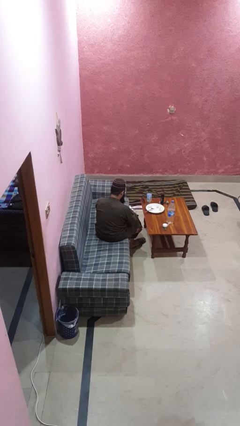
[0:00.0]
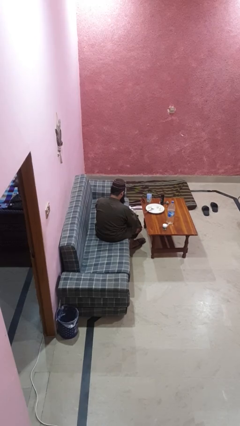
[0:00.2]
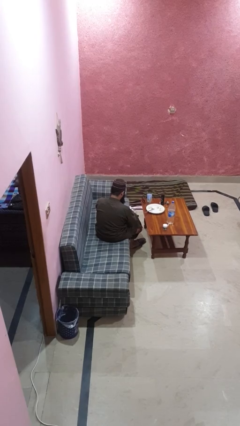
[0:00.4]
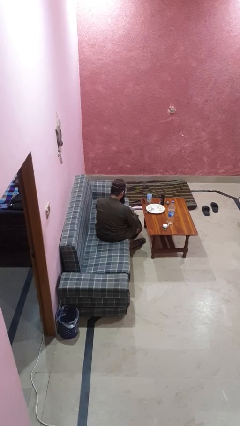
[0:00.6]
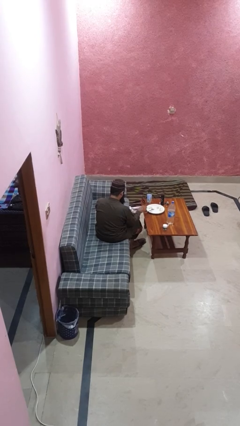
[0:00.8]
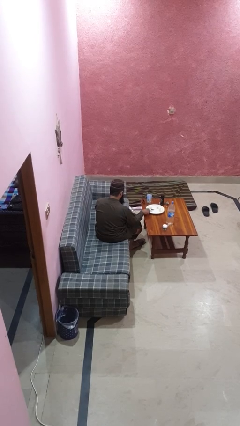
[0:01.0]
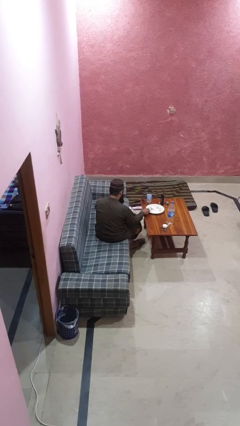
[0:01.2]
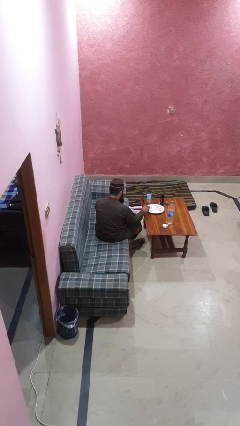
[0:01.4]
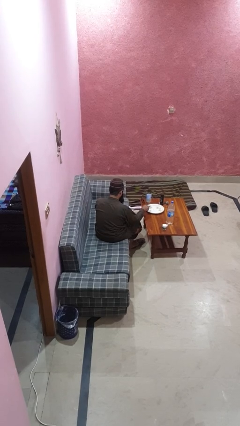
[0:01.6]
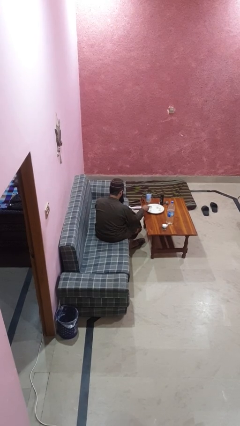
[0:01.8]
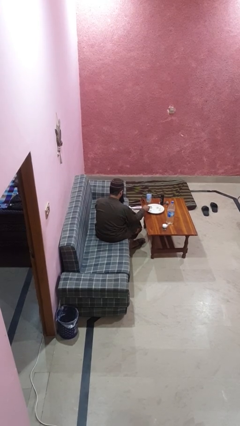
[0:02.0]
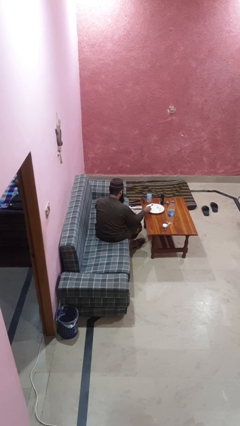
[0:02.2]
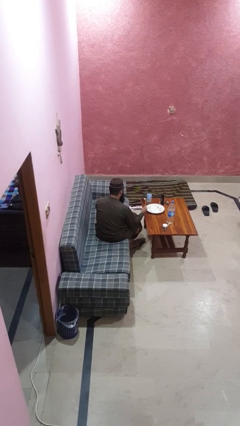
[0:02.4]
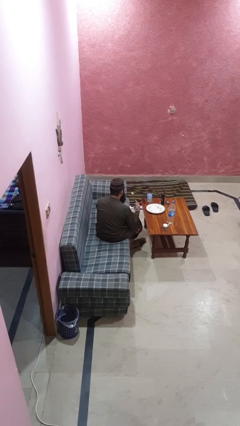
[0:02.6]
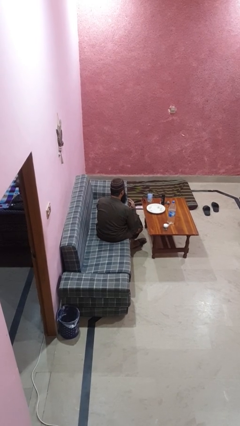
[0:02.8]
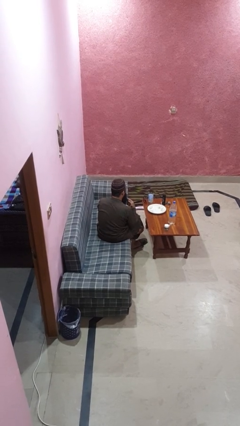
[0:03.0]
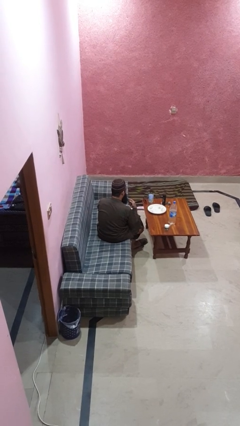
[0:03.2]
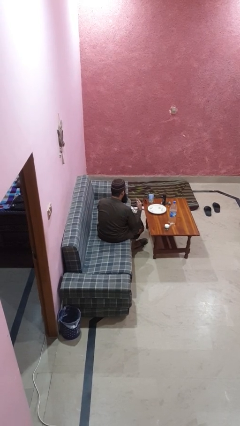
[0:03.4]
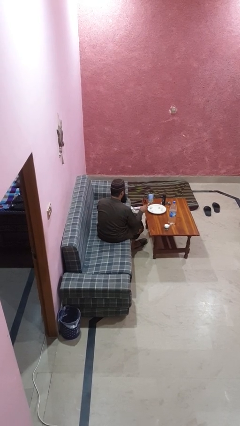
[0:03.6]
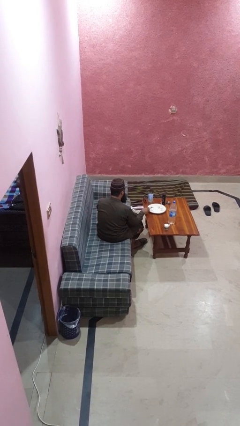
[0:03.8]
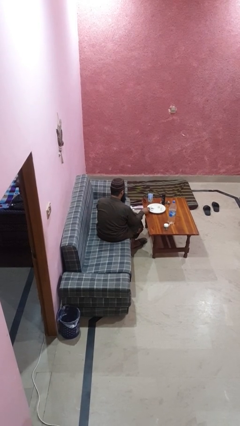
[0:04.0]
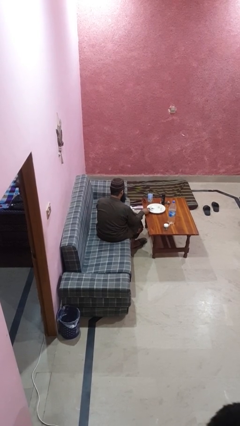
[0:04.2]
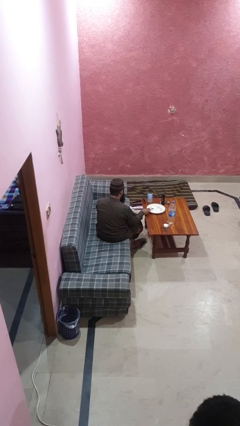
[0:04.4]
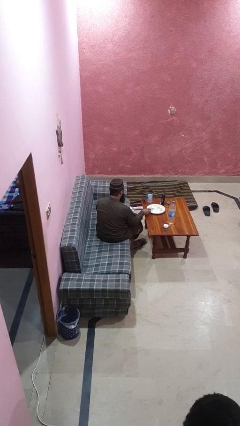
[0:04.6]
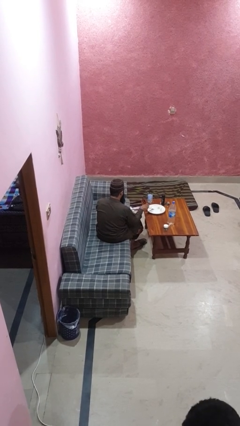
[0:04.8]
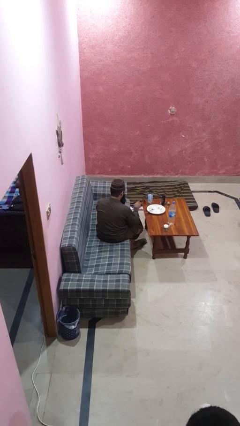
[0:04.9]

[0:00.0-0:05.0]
person eats with utensil

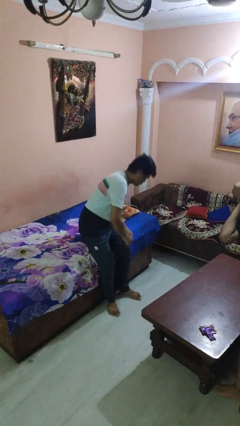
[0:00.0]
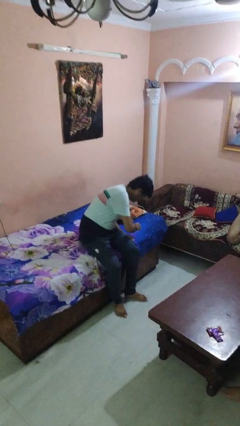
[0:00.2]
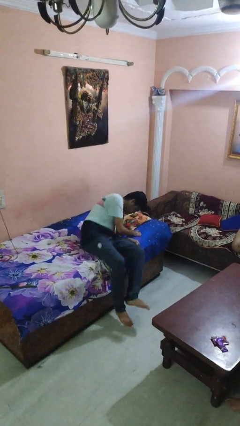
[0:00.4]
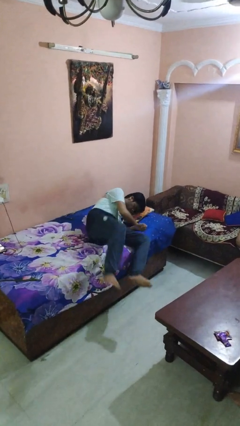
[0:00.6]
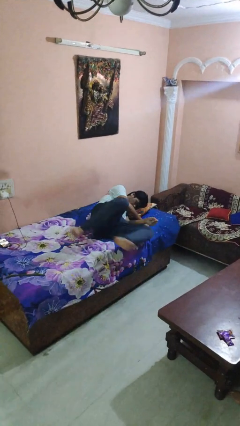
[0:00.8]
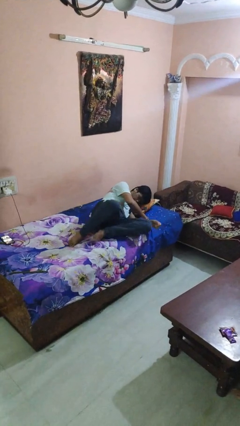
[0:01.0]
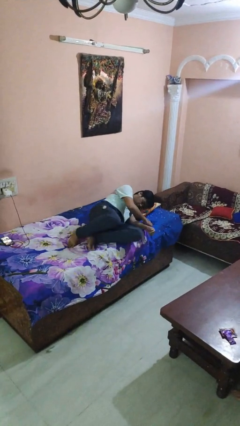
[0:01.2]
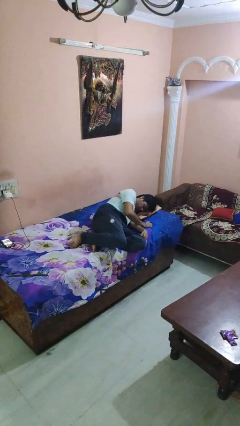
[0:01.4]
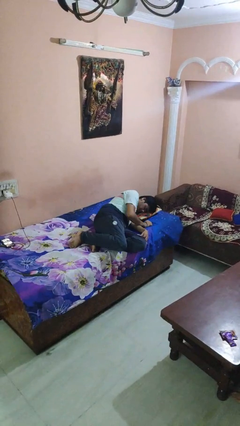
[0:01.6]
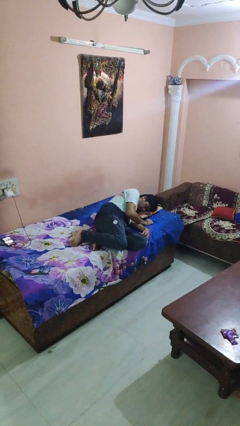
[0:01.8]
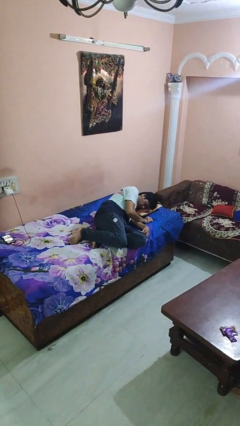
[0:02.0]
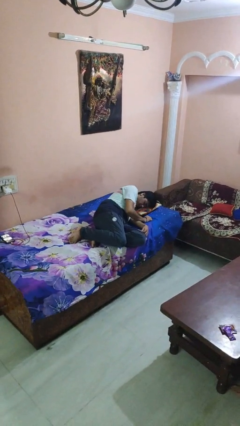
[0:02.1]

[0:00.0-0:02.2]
person lies down on bed

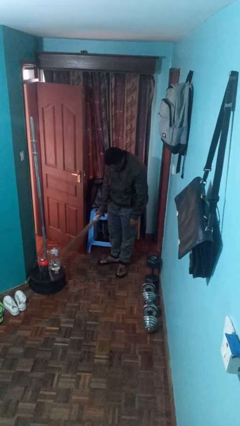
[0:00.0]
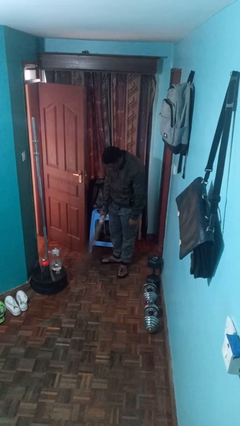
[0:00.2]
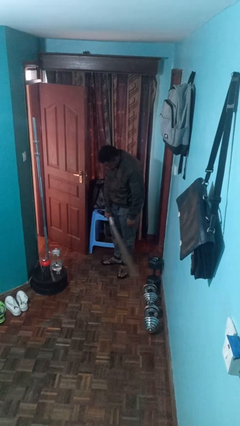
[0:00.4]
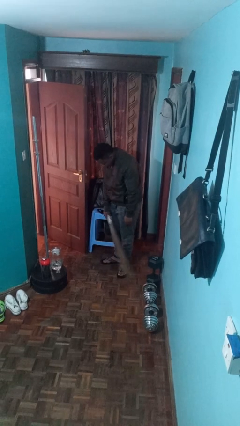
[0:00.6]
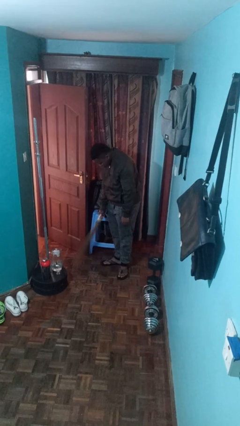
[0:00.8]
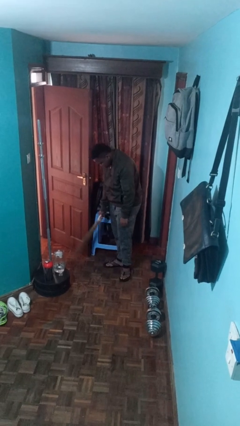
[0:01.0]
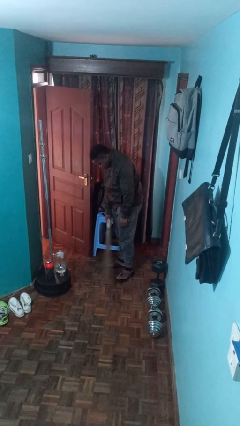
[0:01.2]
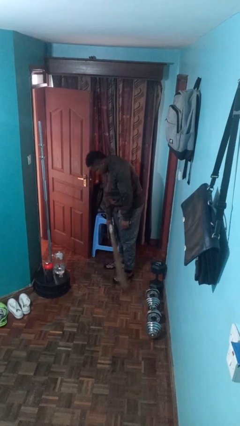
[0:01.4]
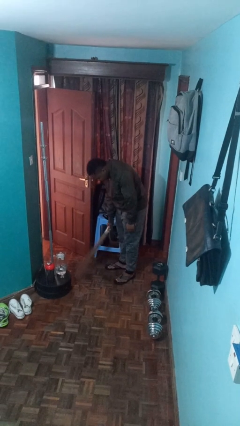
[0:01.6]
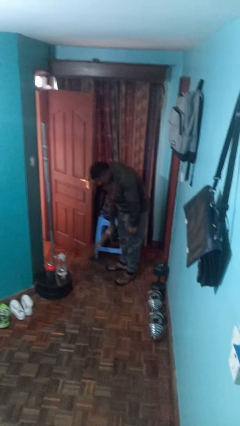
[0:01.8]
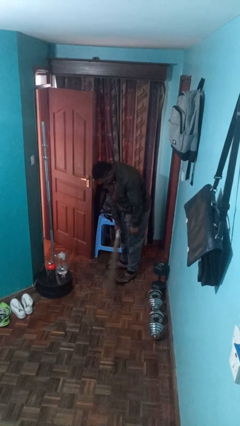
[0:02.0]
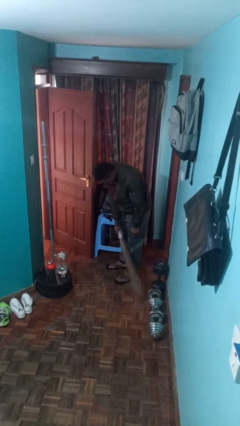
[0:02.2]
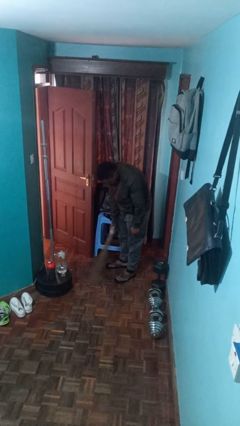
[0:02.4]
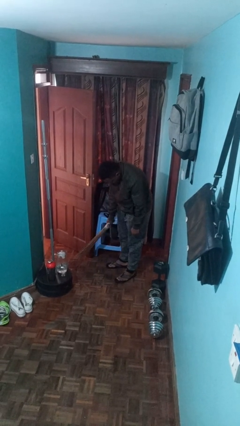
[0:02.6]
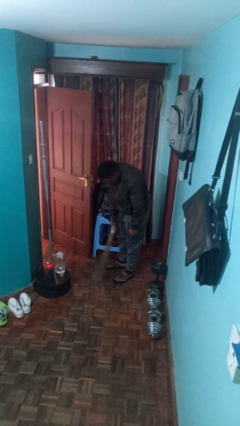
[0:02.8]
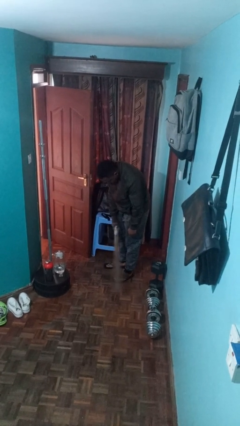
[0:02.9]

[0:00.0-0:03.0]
person sweeps floor

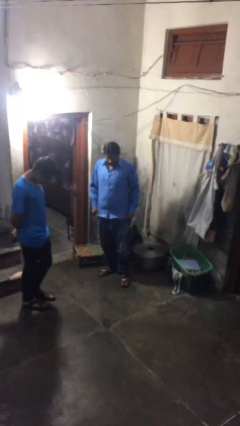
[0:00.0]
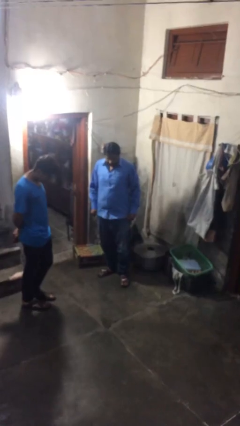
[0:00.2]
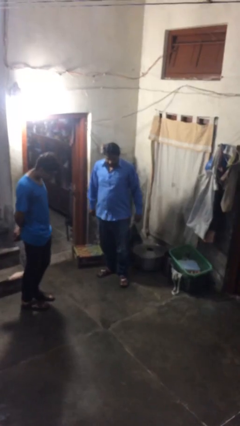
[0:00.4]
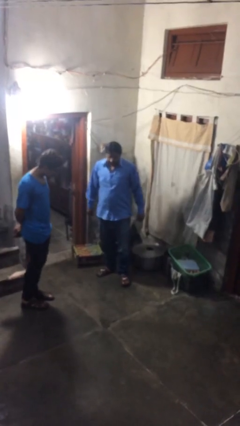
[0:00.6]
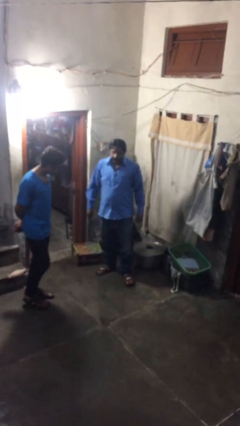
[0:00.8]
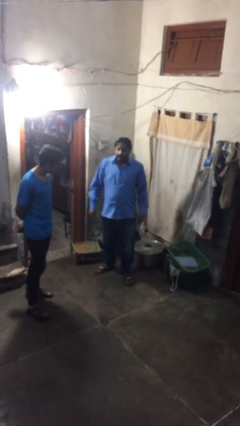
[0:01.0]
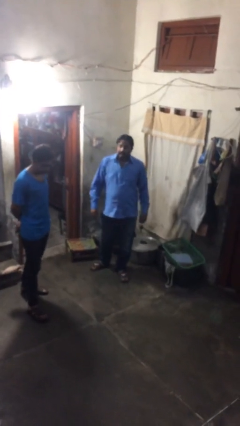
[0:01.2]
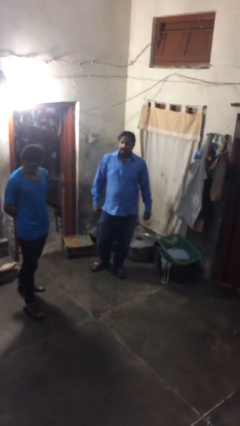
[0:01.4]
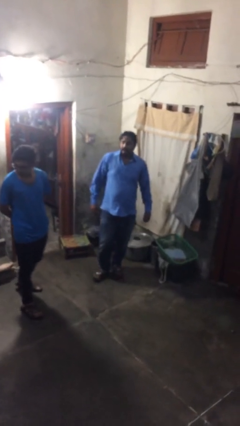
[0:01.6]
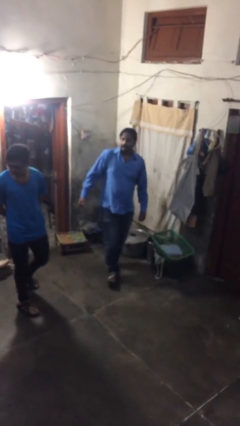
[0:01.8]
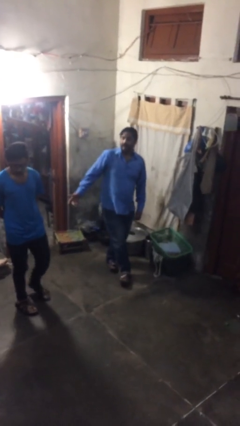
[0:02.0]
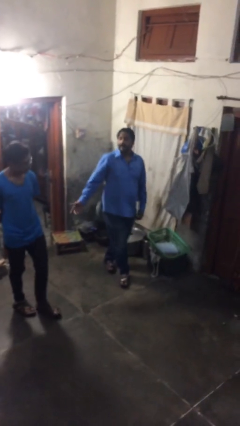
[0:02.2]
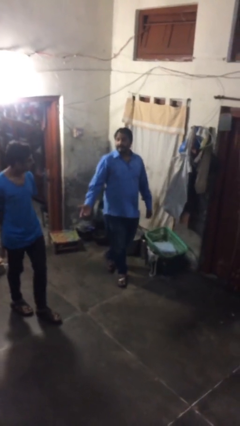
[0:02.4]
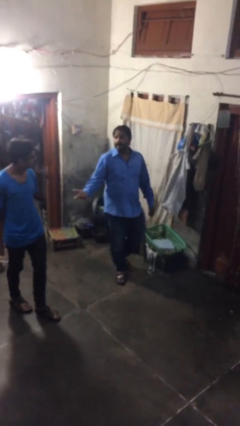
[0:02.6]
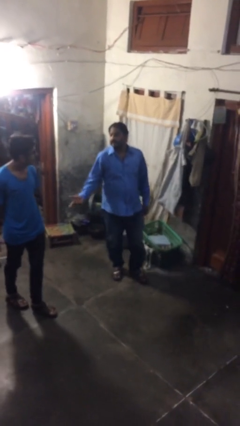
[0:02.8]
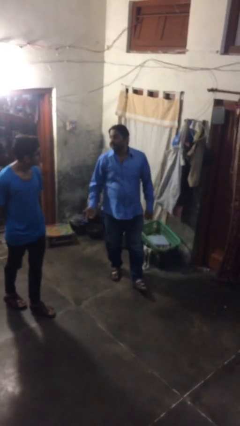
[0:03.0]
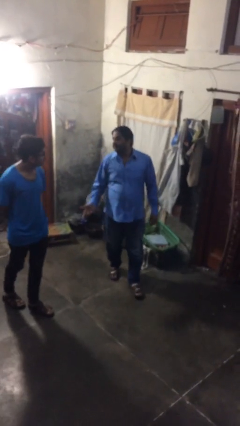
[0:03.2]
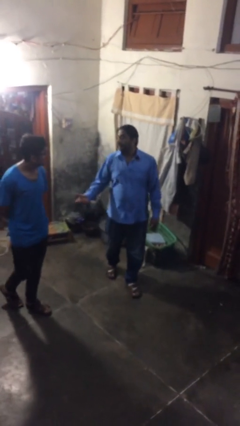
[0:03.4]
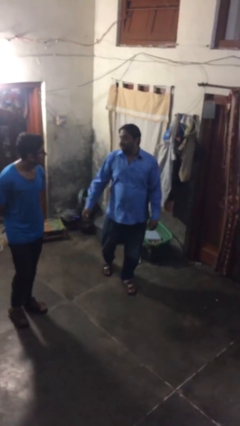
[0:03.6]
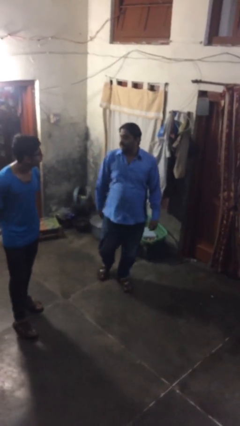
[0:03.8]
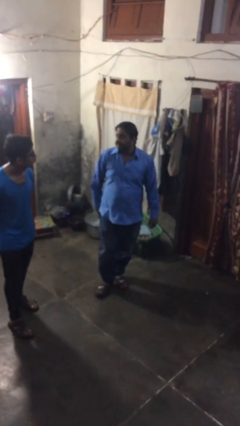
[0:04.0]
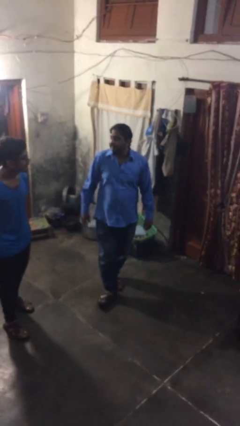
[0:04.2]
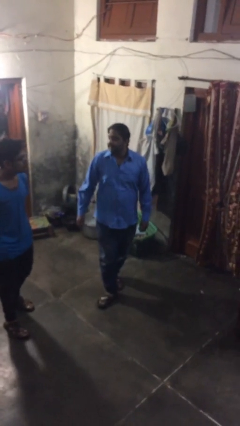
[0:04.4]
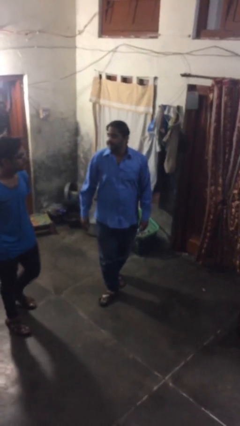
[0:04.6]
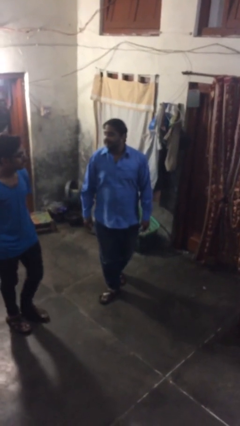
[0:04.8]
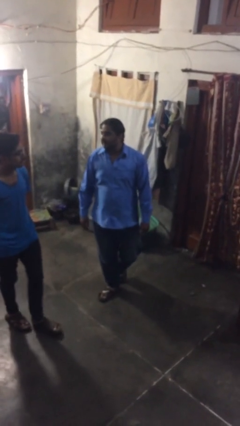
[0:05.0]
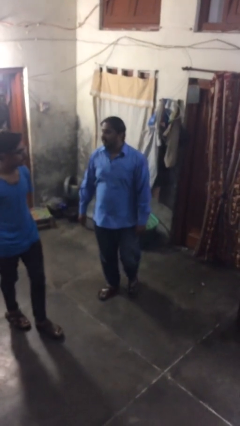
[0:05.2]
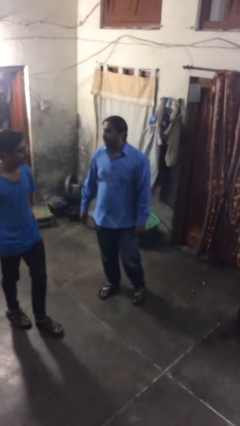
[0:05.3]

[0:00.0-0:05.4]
person talks to person

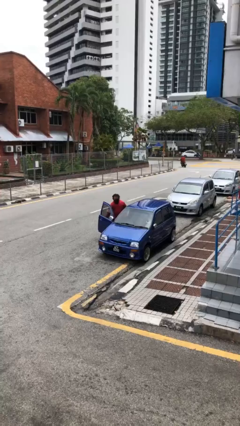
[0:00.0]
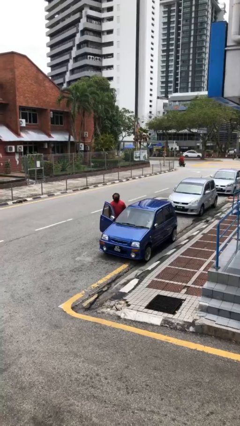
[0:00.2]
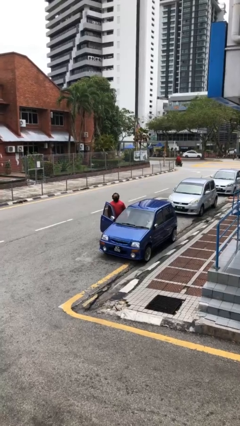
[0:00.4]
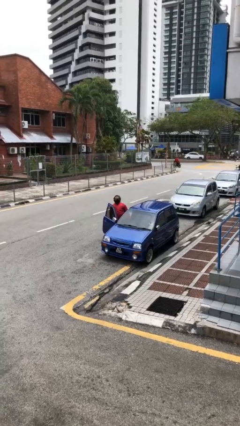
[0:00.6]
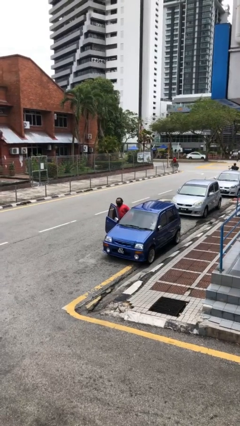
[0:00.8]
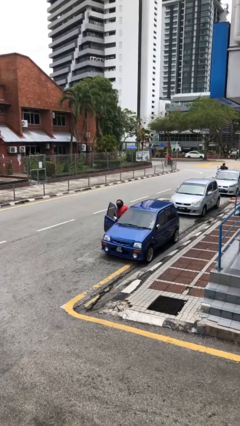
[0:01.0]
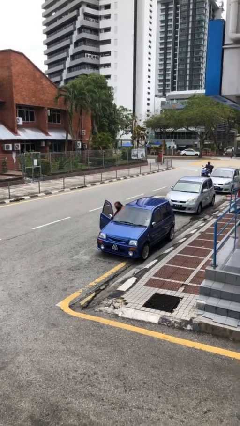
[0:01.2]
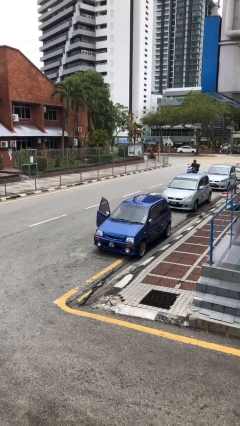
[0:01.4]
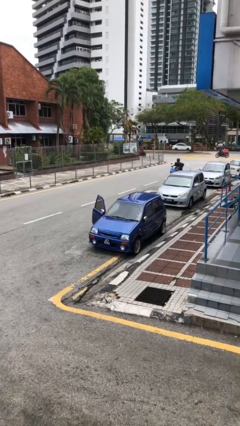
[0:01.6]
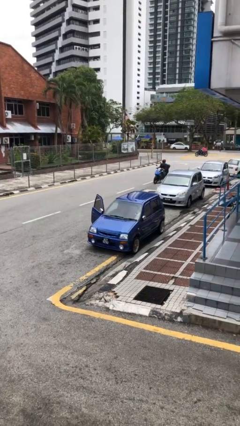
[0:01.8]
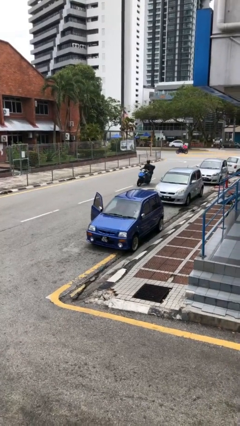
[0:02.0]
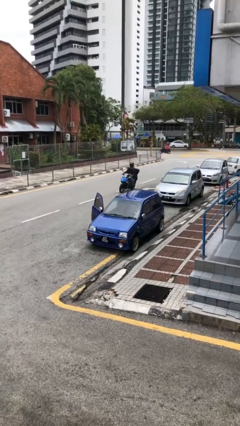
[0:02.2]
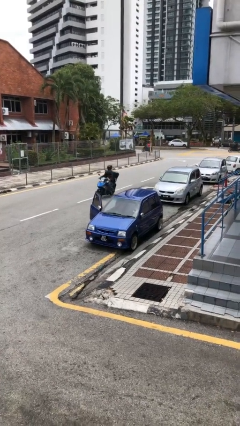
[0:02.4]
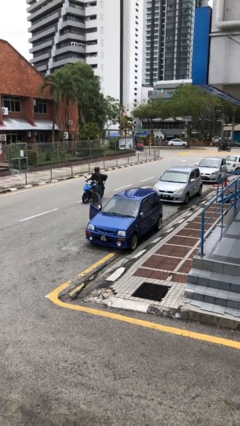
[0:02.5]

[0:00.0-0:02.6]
person enters car
